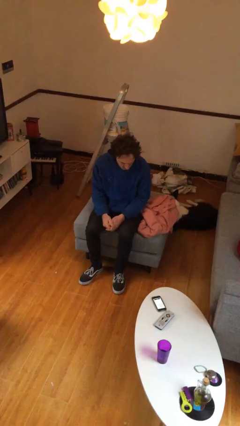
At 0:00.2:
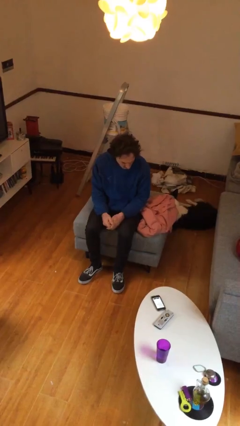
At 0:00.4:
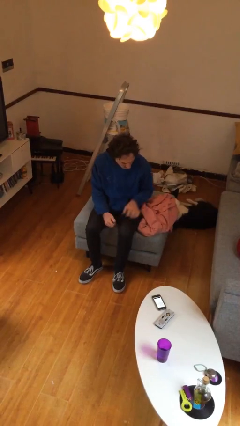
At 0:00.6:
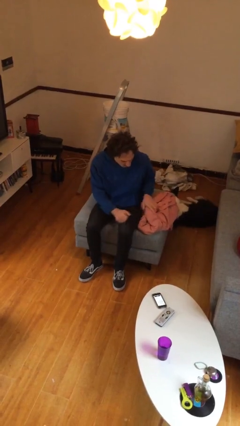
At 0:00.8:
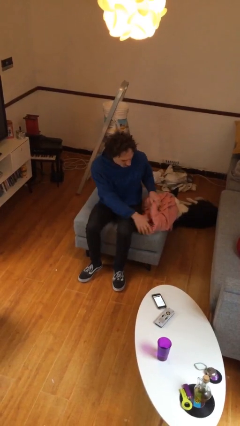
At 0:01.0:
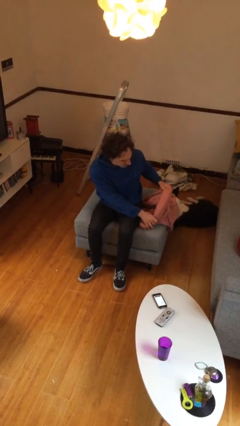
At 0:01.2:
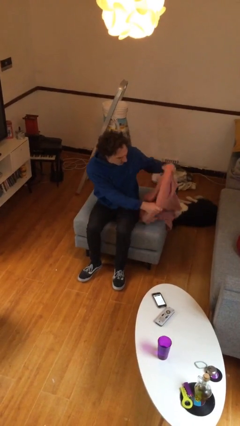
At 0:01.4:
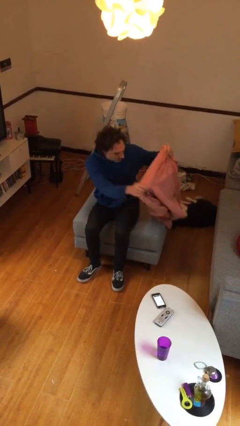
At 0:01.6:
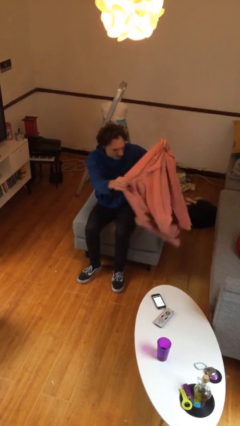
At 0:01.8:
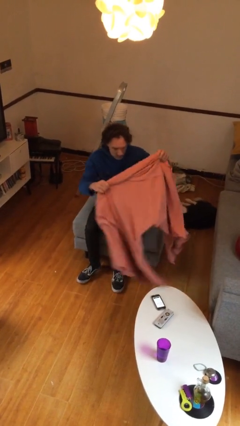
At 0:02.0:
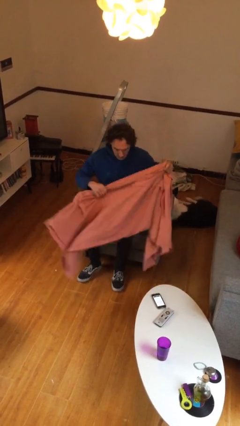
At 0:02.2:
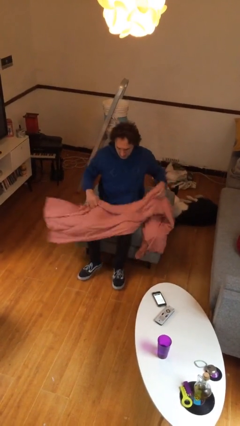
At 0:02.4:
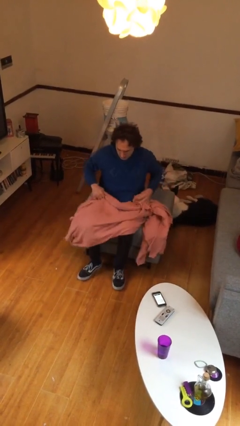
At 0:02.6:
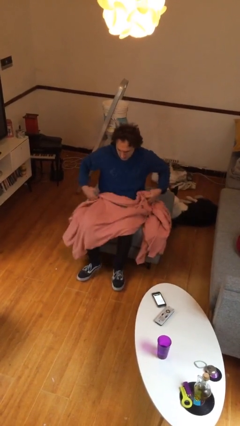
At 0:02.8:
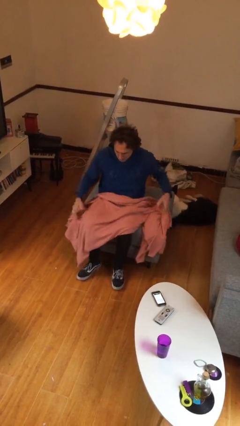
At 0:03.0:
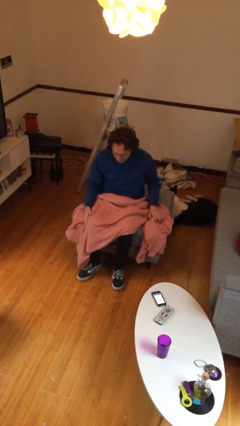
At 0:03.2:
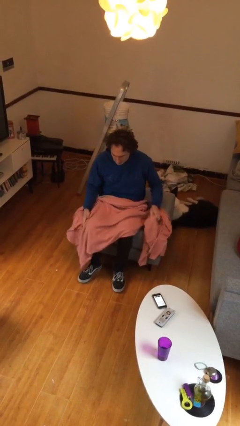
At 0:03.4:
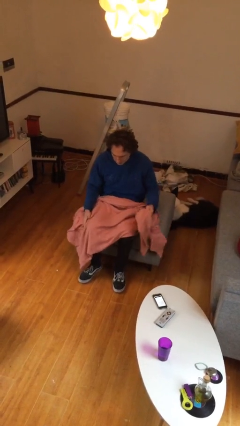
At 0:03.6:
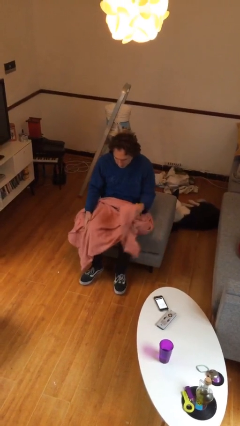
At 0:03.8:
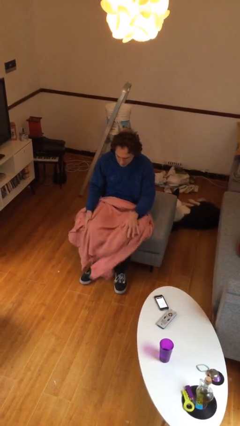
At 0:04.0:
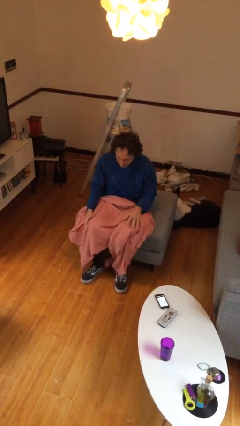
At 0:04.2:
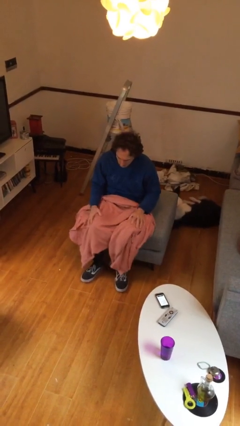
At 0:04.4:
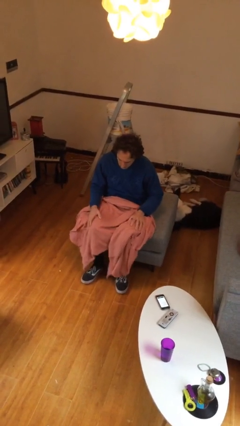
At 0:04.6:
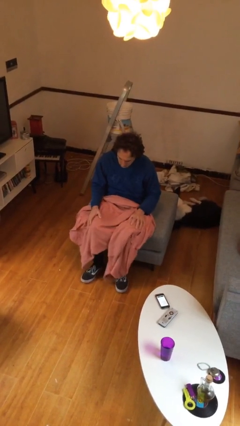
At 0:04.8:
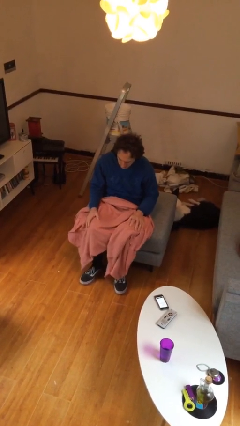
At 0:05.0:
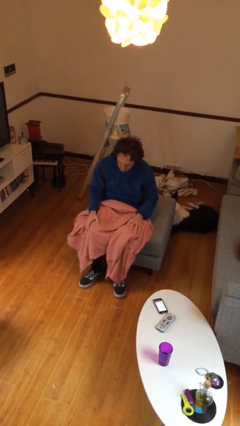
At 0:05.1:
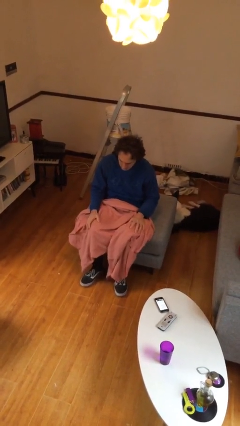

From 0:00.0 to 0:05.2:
person covers with blanket

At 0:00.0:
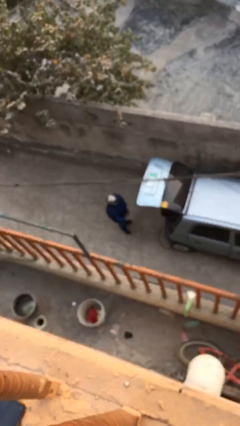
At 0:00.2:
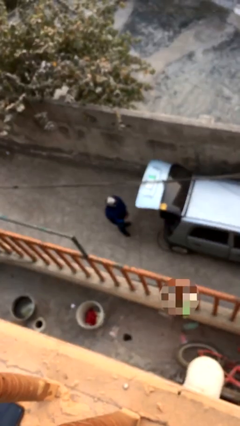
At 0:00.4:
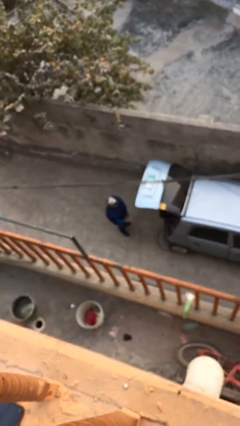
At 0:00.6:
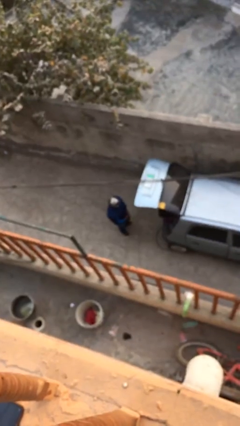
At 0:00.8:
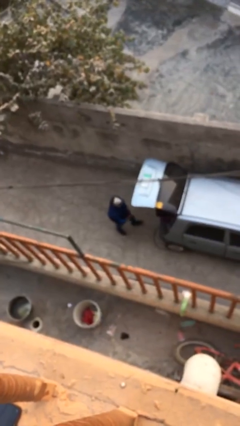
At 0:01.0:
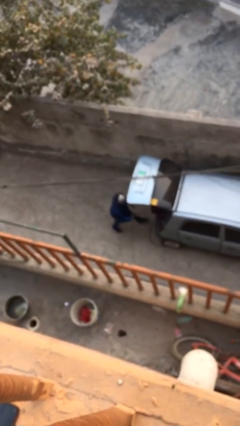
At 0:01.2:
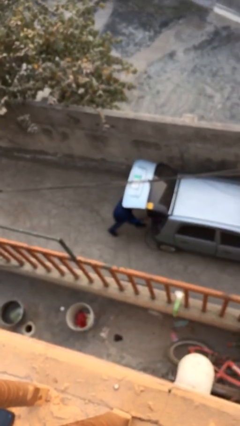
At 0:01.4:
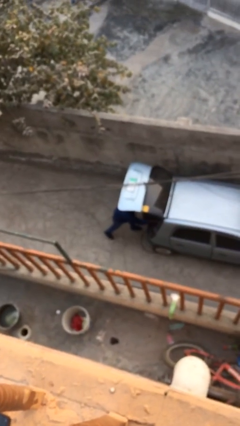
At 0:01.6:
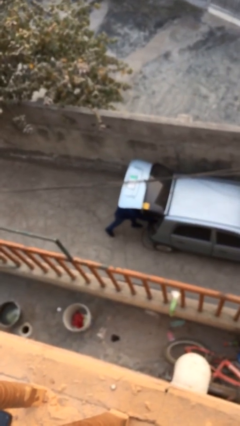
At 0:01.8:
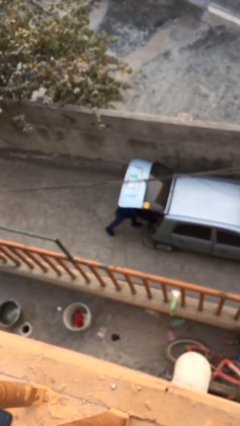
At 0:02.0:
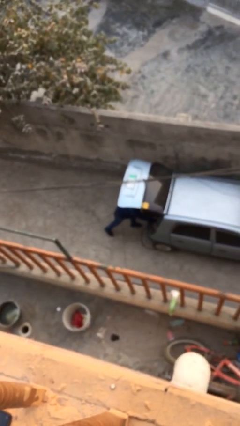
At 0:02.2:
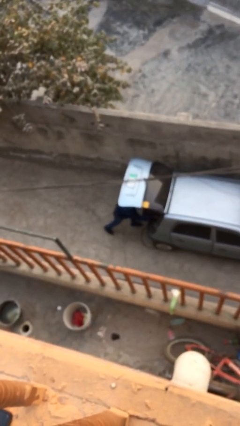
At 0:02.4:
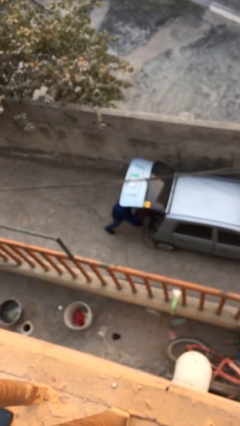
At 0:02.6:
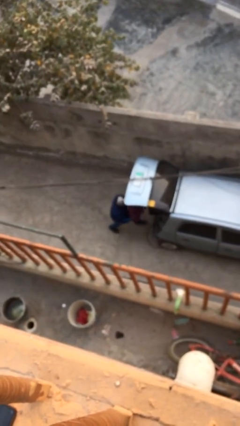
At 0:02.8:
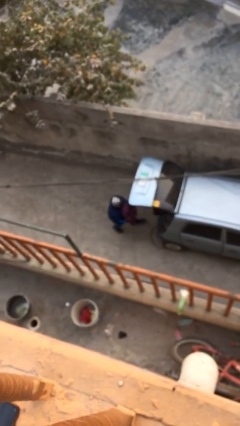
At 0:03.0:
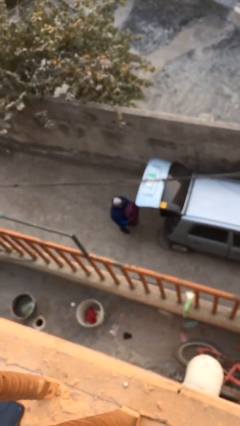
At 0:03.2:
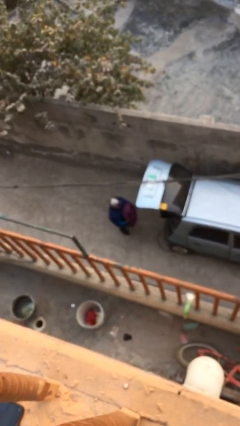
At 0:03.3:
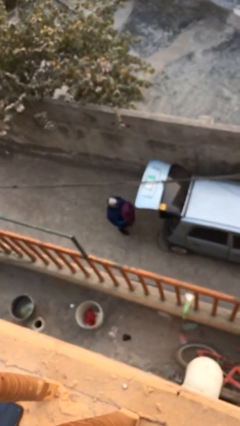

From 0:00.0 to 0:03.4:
person unloads car

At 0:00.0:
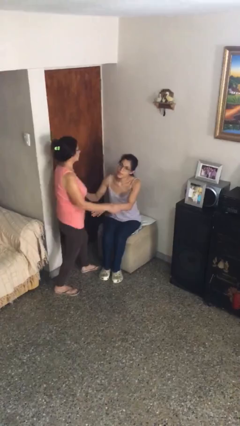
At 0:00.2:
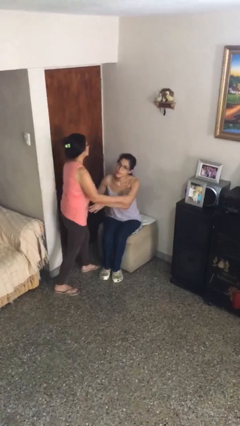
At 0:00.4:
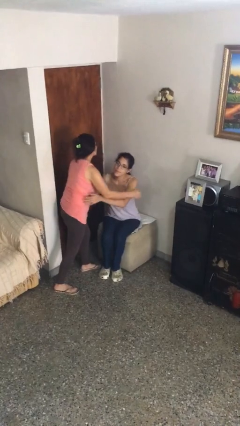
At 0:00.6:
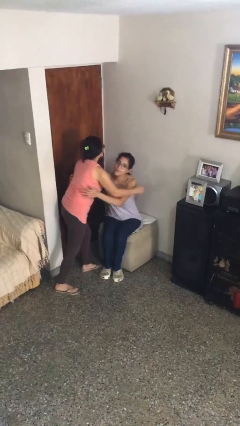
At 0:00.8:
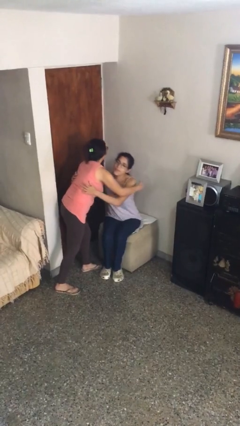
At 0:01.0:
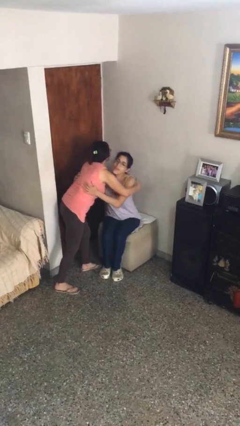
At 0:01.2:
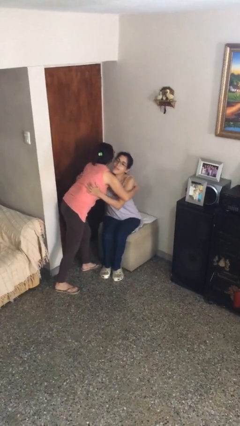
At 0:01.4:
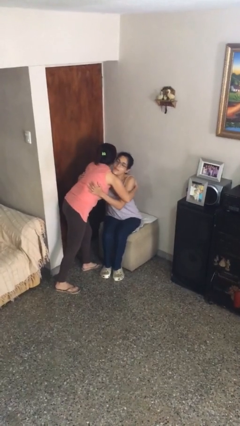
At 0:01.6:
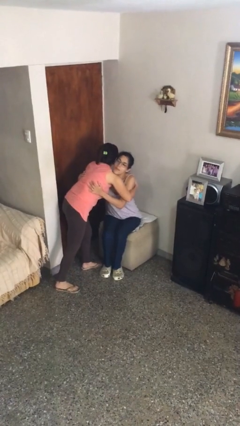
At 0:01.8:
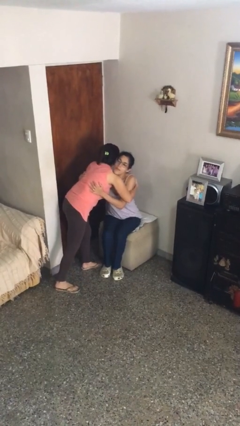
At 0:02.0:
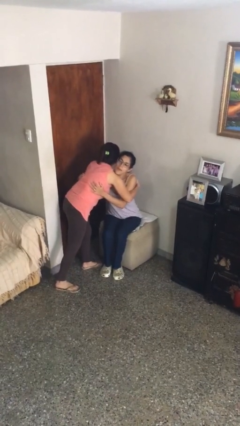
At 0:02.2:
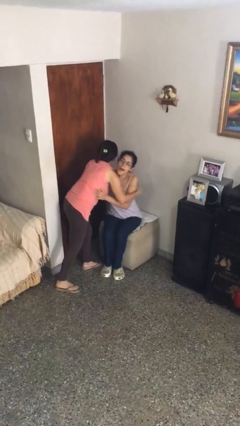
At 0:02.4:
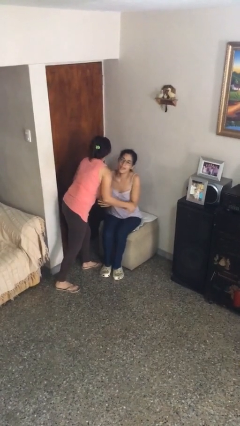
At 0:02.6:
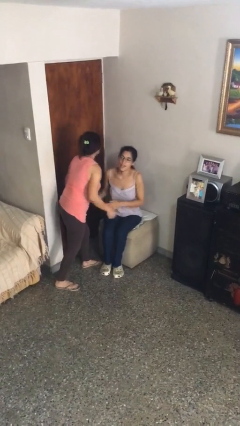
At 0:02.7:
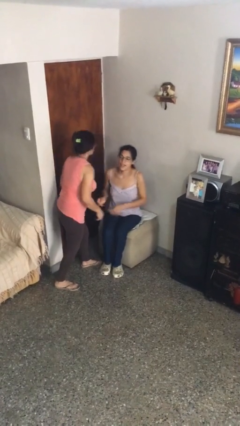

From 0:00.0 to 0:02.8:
person embraces person

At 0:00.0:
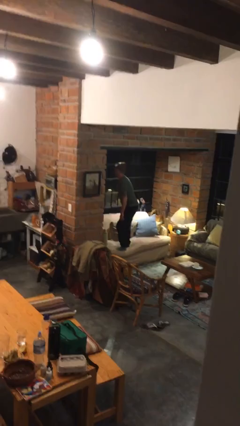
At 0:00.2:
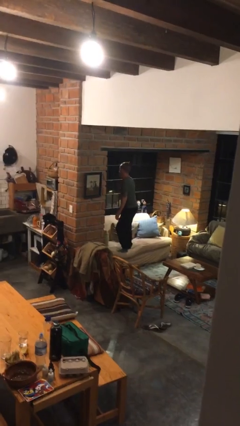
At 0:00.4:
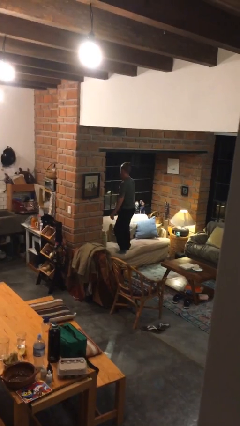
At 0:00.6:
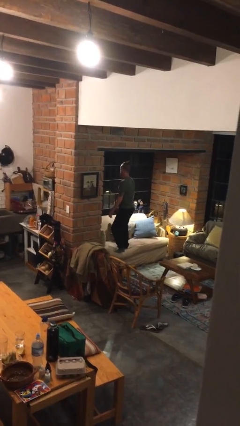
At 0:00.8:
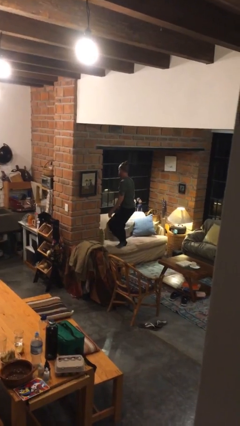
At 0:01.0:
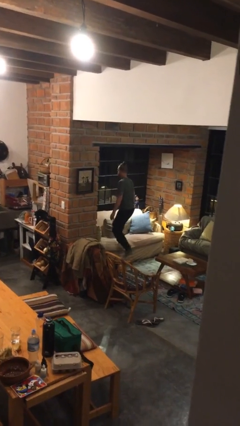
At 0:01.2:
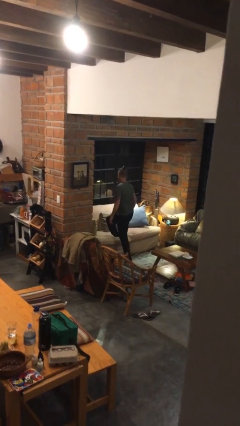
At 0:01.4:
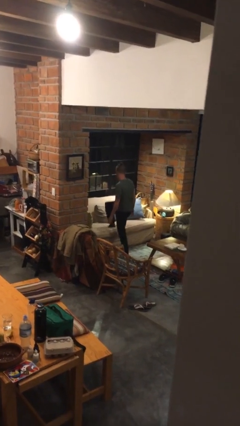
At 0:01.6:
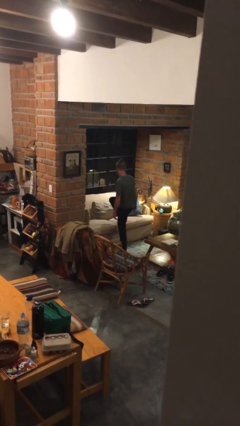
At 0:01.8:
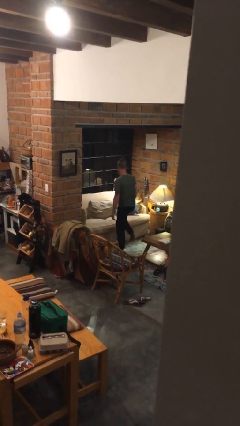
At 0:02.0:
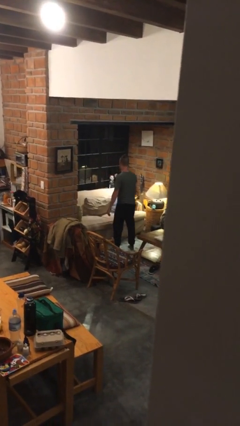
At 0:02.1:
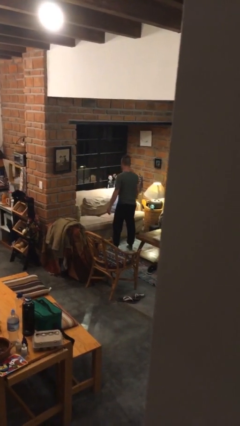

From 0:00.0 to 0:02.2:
person climbs off couch

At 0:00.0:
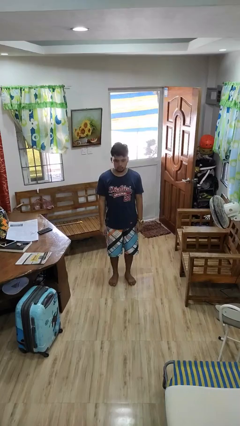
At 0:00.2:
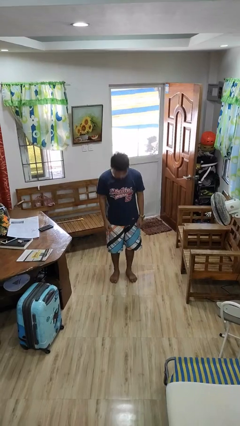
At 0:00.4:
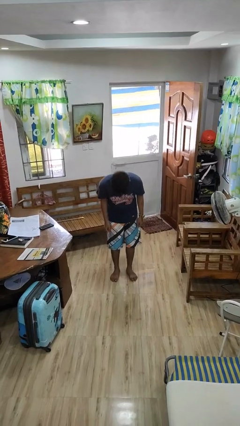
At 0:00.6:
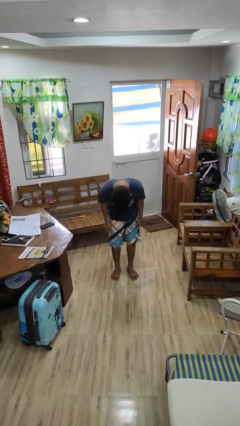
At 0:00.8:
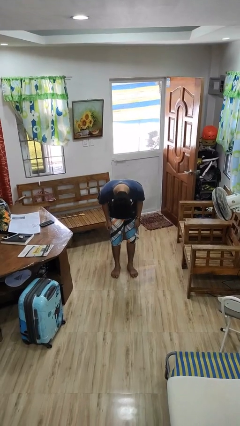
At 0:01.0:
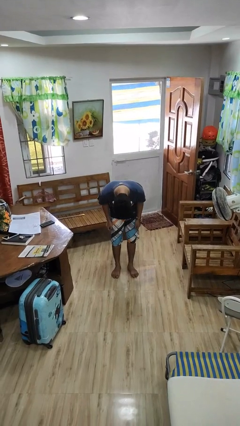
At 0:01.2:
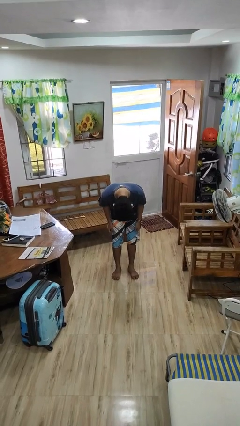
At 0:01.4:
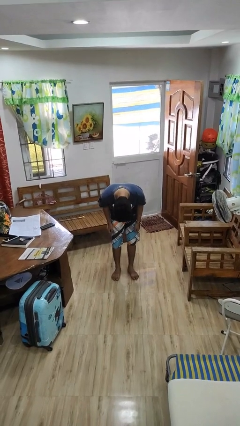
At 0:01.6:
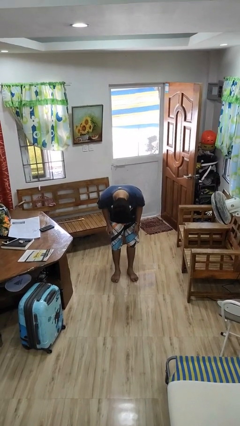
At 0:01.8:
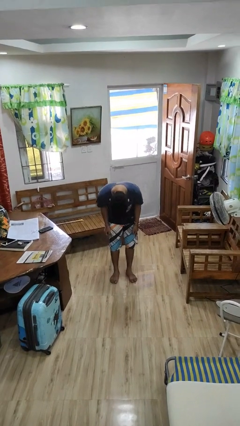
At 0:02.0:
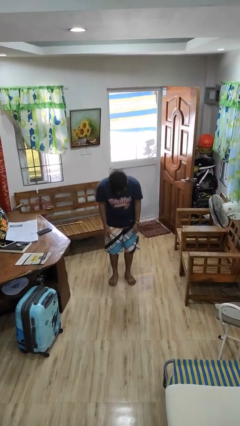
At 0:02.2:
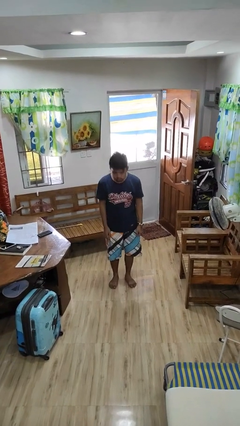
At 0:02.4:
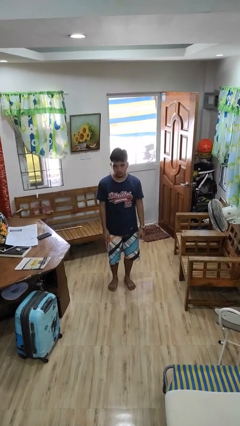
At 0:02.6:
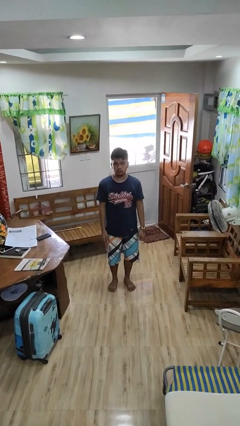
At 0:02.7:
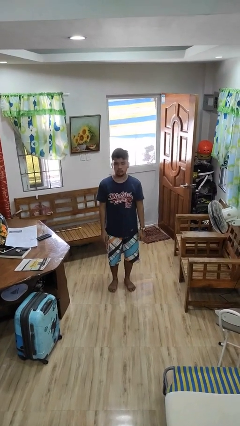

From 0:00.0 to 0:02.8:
person bows

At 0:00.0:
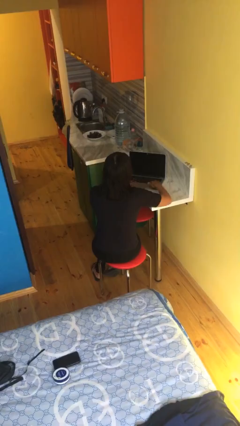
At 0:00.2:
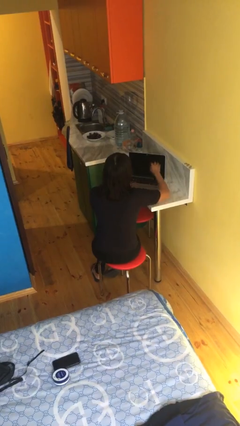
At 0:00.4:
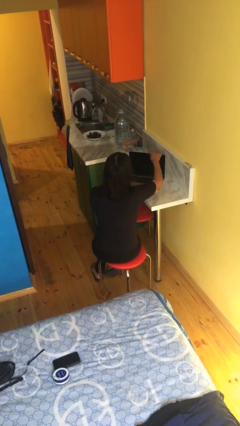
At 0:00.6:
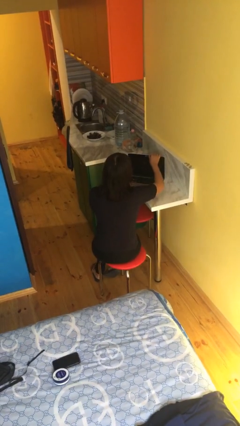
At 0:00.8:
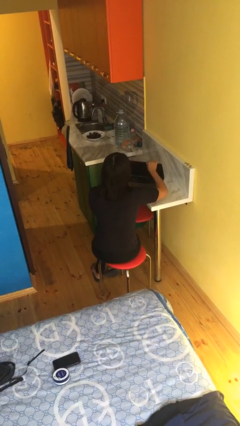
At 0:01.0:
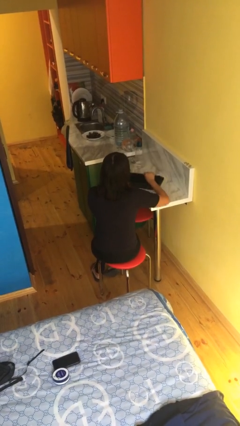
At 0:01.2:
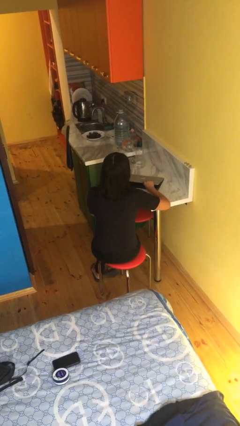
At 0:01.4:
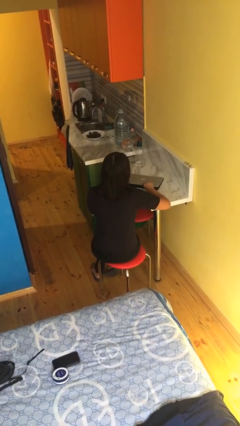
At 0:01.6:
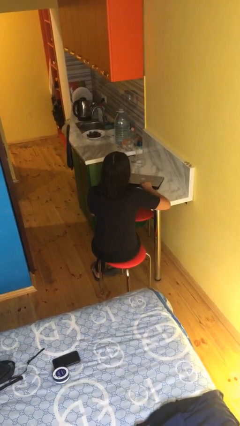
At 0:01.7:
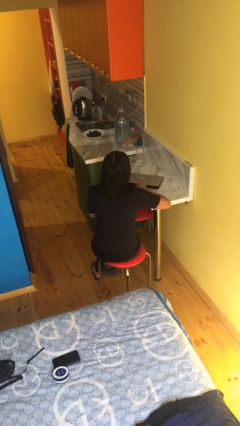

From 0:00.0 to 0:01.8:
person closes laptop
